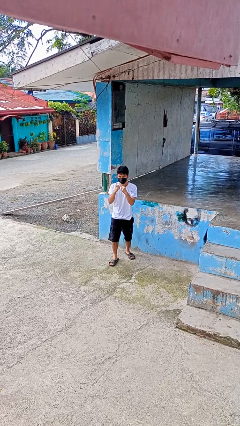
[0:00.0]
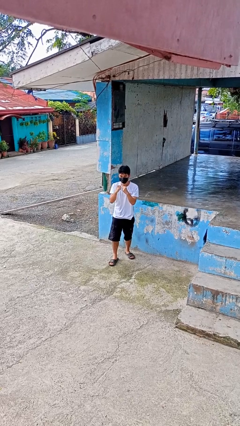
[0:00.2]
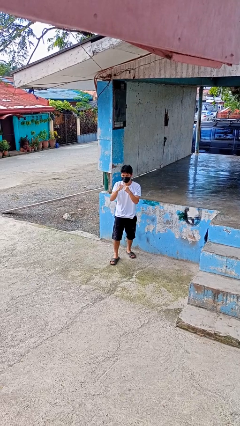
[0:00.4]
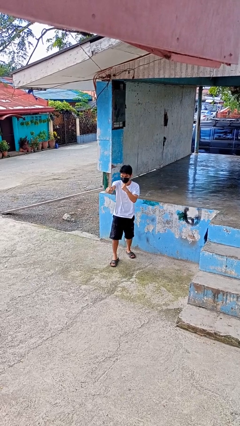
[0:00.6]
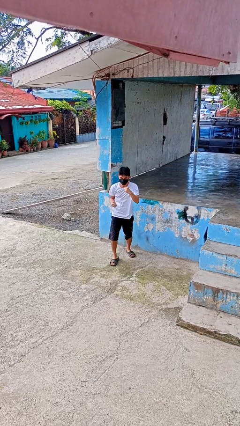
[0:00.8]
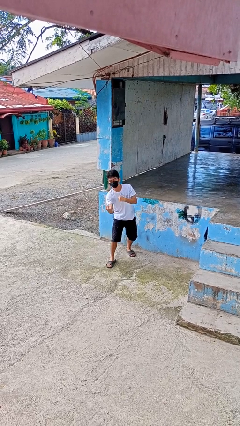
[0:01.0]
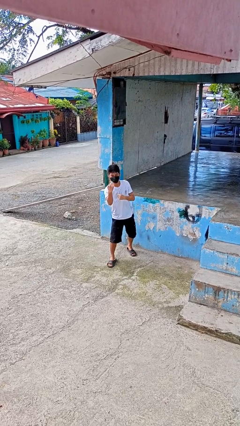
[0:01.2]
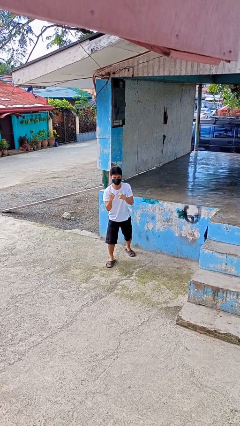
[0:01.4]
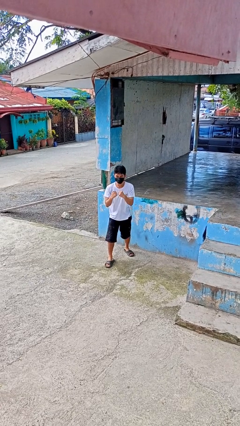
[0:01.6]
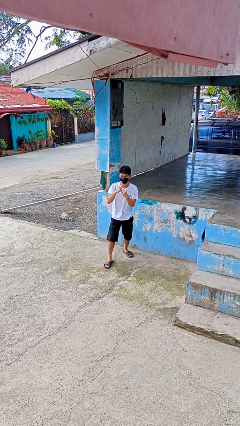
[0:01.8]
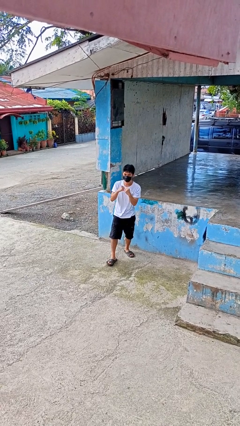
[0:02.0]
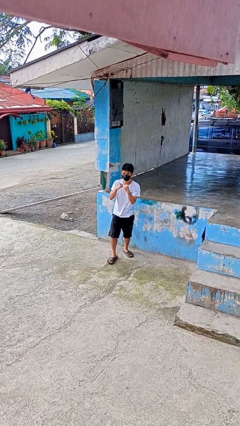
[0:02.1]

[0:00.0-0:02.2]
person punches

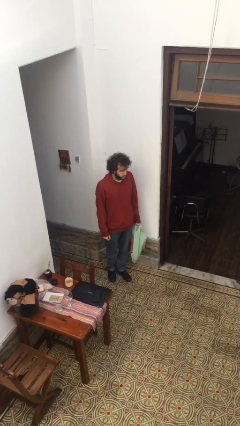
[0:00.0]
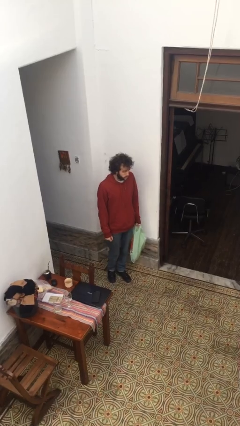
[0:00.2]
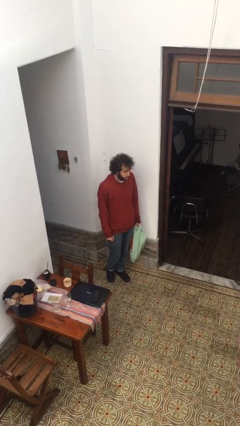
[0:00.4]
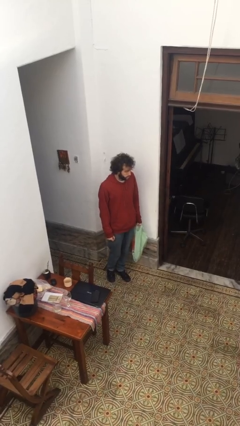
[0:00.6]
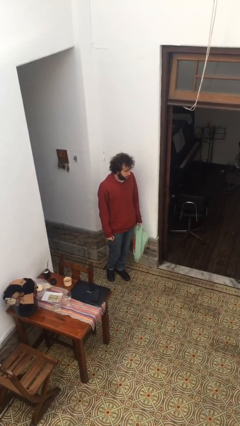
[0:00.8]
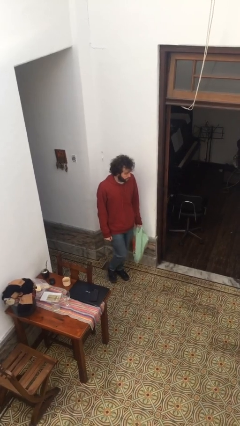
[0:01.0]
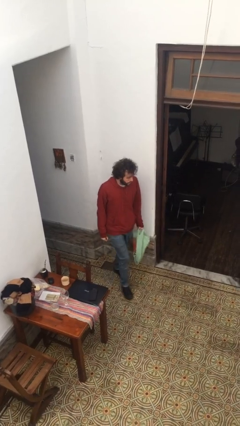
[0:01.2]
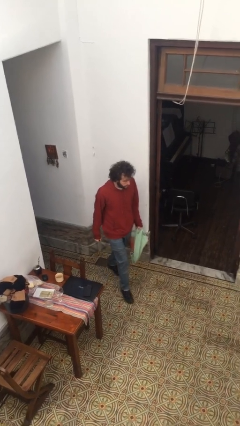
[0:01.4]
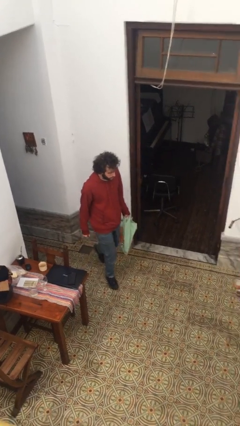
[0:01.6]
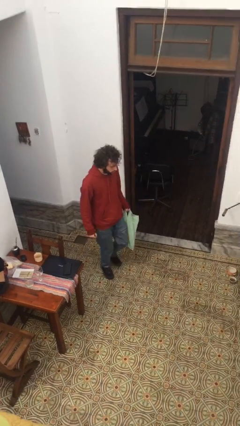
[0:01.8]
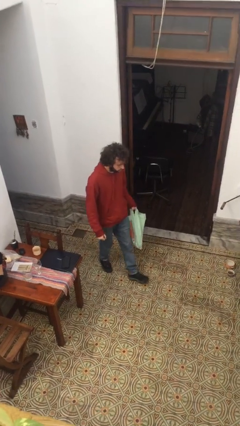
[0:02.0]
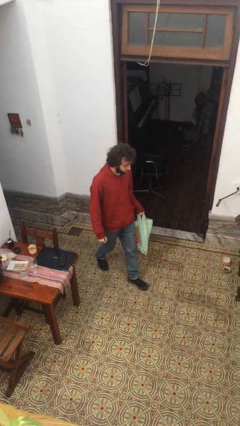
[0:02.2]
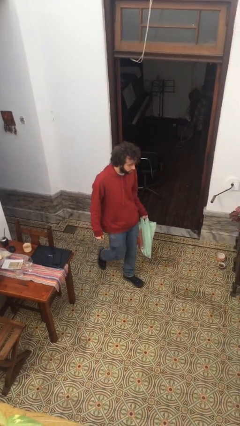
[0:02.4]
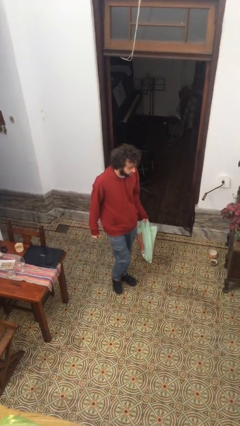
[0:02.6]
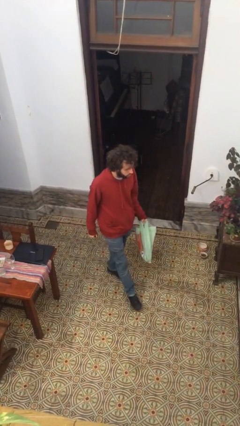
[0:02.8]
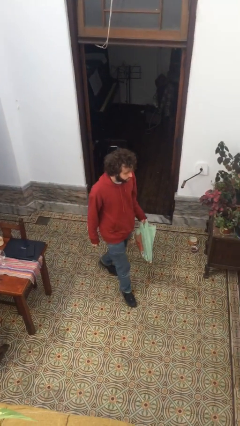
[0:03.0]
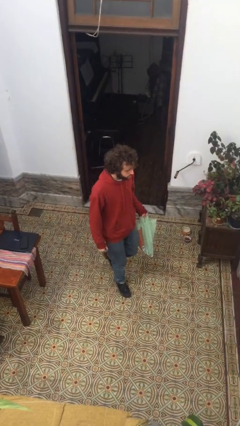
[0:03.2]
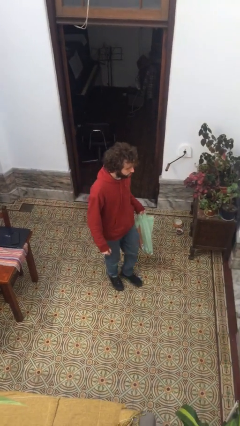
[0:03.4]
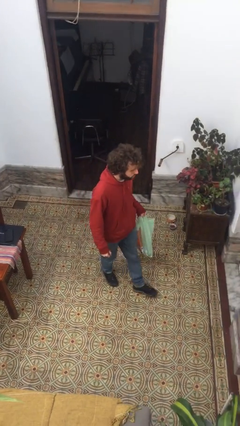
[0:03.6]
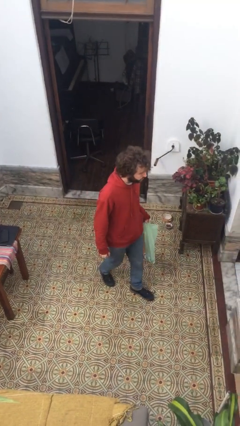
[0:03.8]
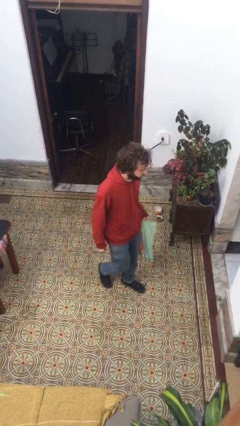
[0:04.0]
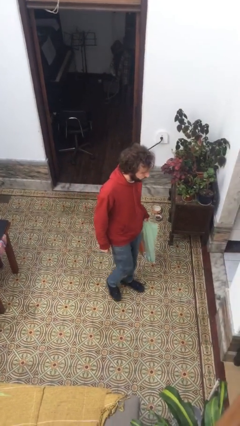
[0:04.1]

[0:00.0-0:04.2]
person carries groceries

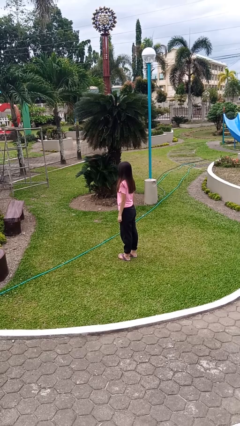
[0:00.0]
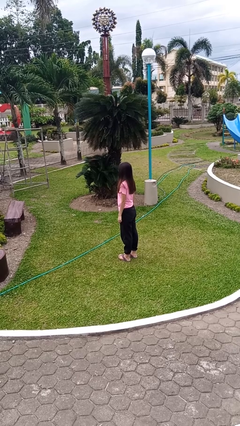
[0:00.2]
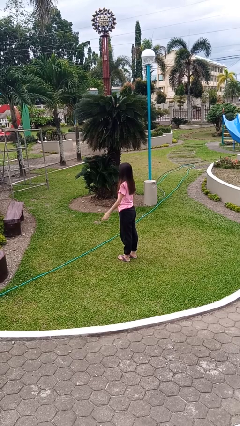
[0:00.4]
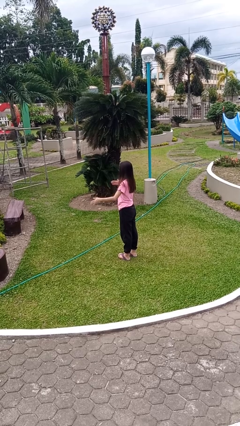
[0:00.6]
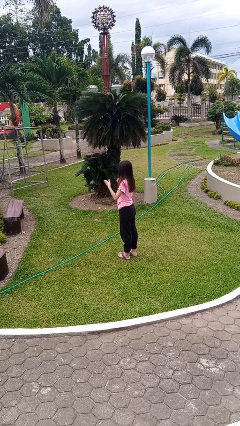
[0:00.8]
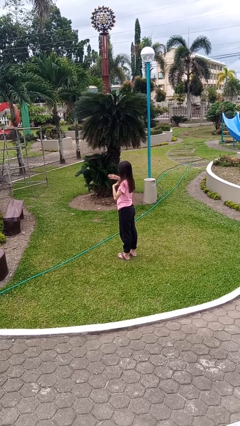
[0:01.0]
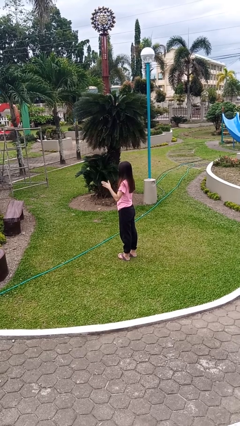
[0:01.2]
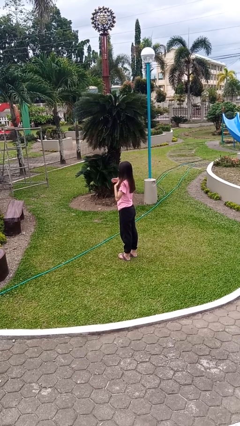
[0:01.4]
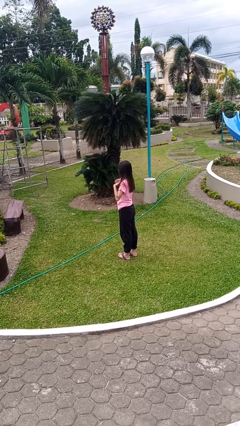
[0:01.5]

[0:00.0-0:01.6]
person drums on chest

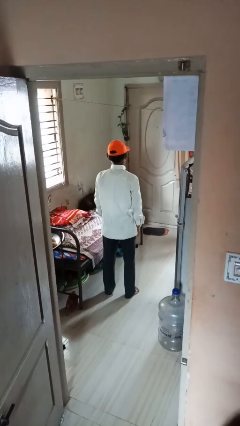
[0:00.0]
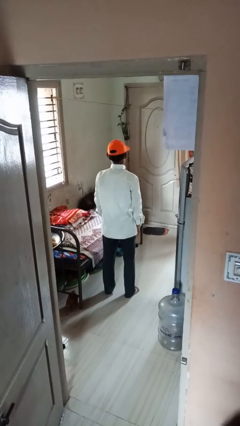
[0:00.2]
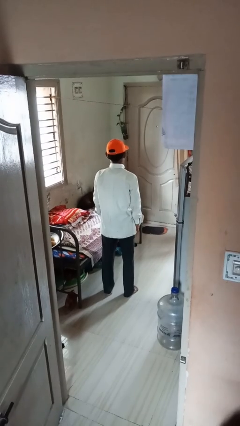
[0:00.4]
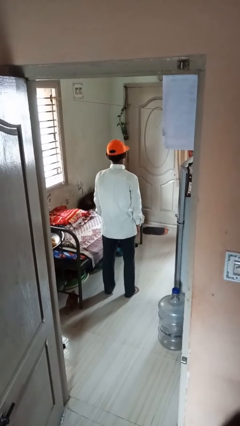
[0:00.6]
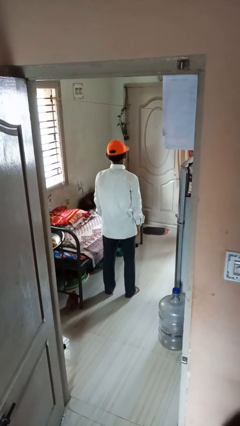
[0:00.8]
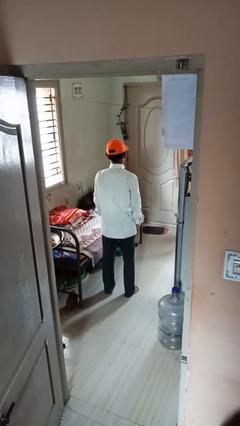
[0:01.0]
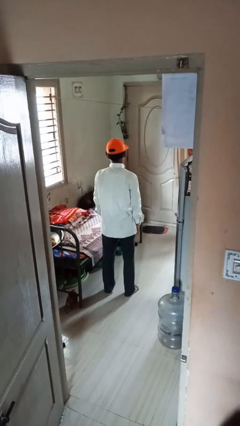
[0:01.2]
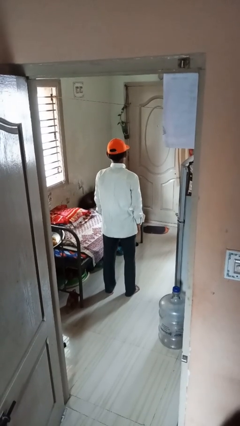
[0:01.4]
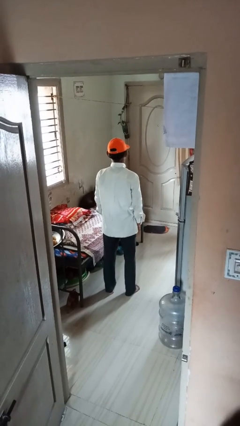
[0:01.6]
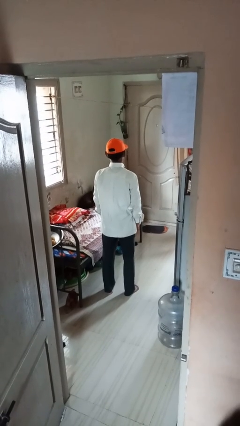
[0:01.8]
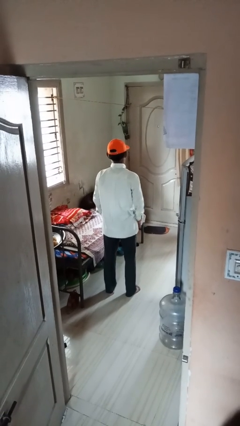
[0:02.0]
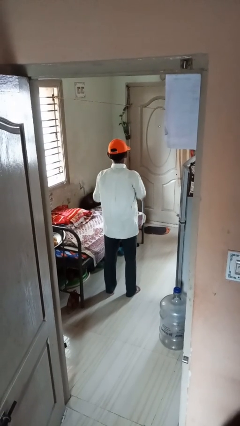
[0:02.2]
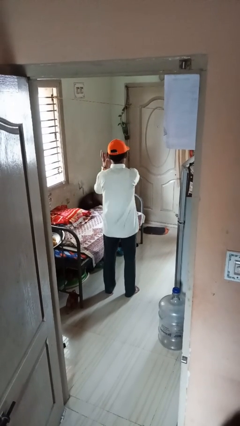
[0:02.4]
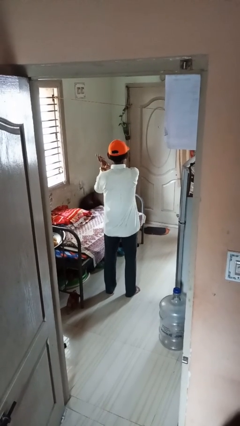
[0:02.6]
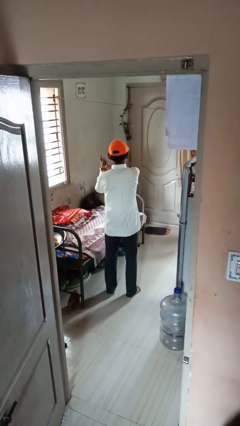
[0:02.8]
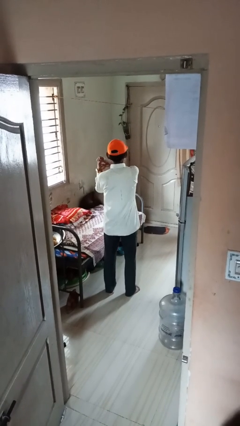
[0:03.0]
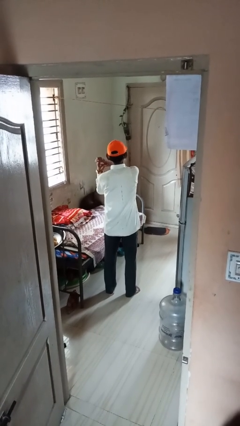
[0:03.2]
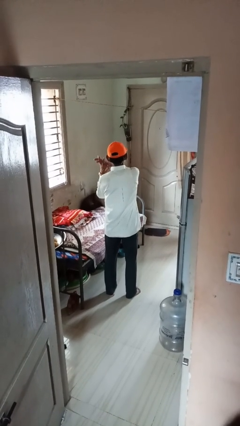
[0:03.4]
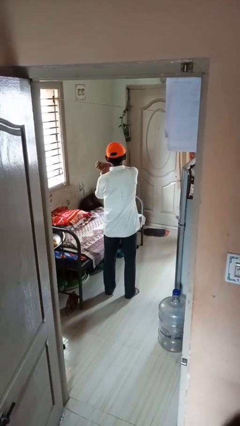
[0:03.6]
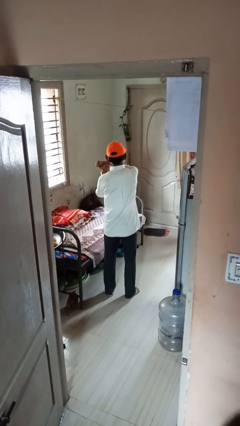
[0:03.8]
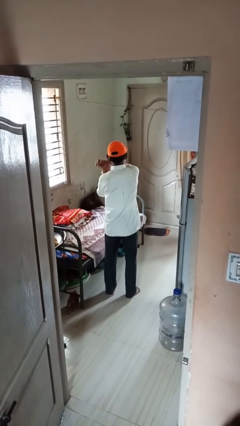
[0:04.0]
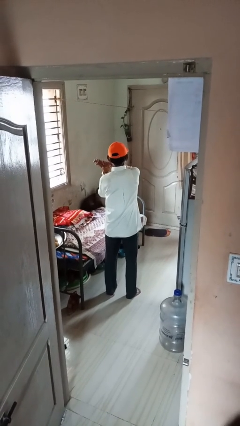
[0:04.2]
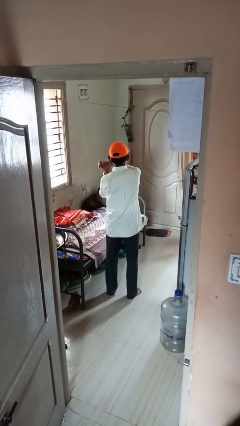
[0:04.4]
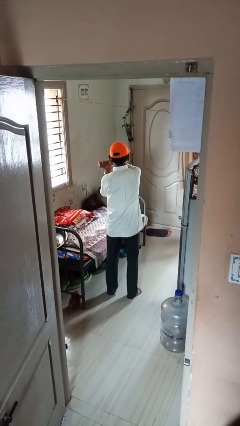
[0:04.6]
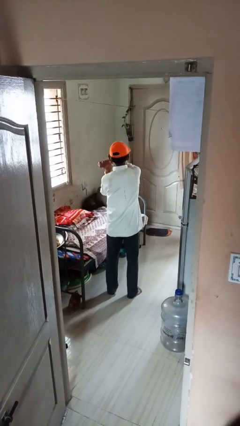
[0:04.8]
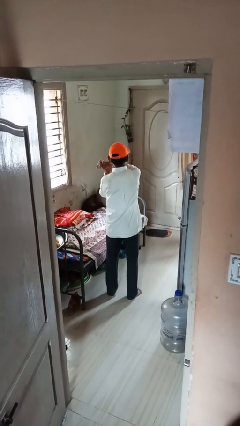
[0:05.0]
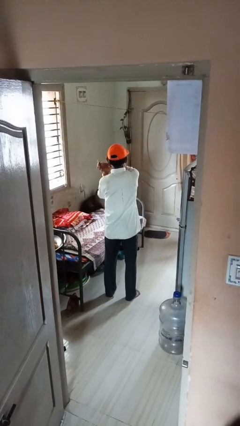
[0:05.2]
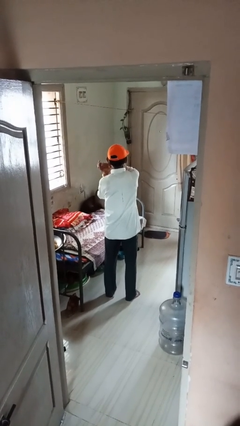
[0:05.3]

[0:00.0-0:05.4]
person cracks knuckles

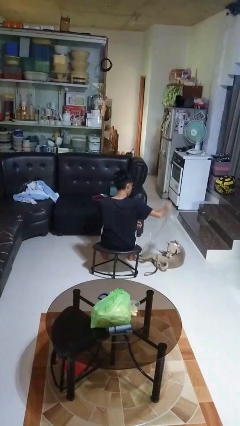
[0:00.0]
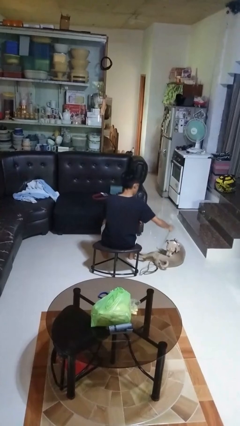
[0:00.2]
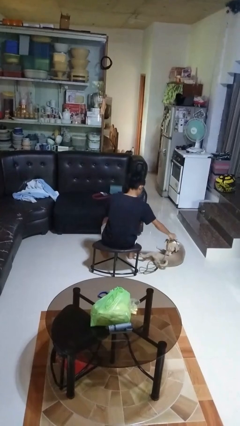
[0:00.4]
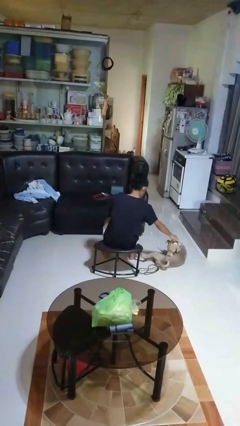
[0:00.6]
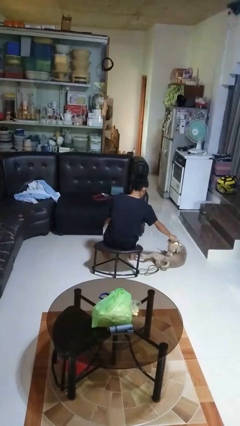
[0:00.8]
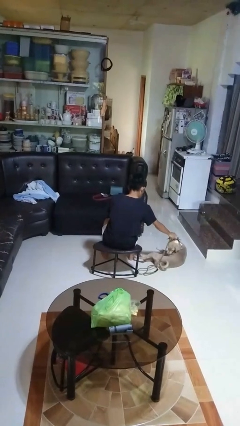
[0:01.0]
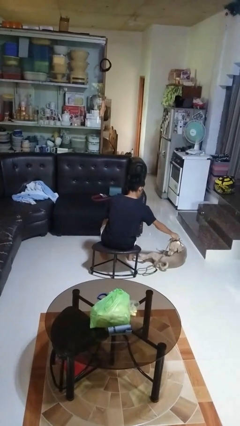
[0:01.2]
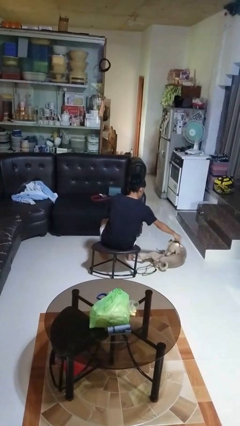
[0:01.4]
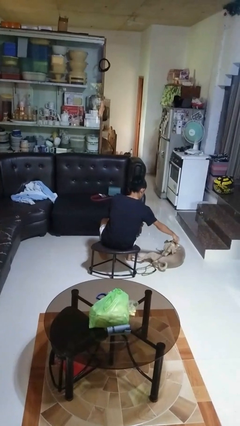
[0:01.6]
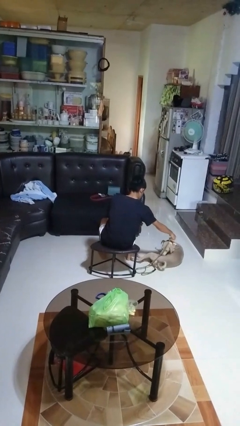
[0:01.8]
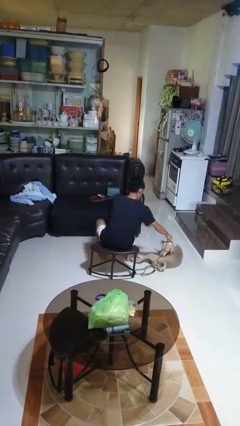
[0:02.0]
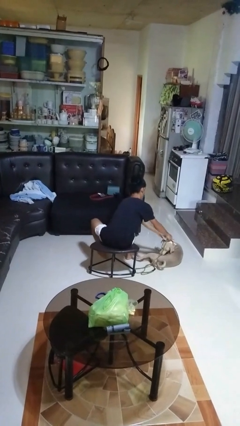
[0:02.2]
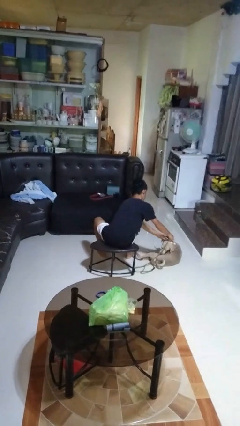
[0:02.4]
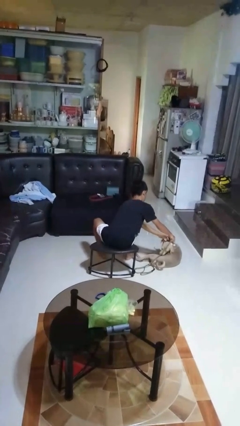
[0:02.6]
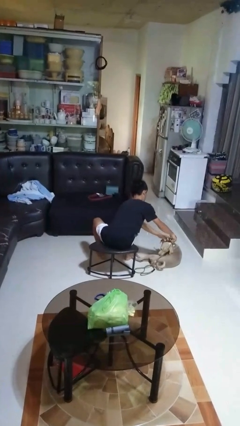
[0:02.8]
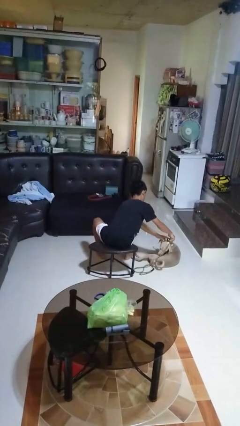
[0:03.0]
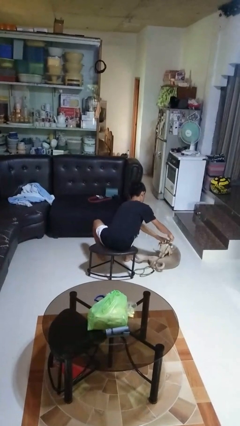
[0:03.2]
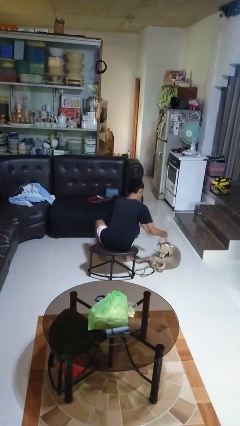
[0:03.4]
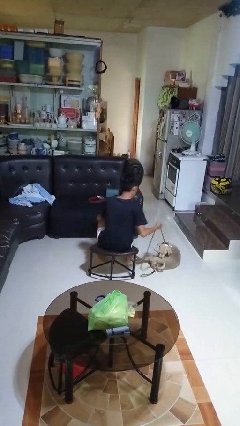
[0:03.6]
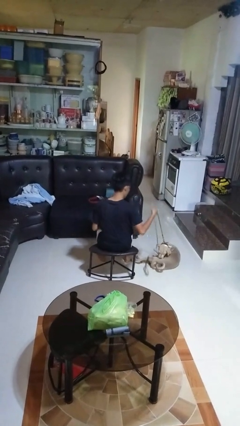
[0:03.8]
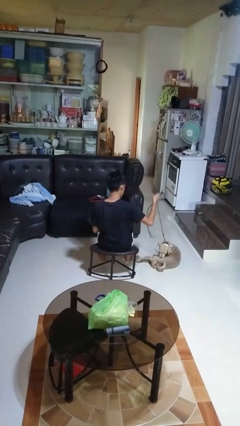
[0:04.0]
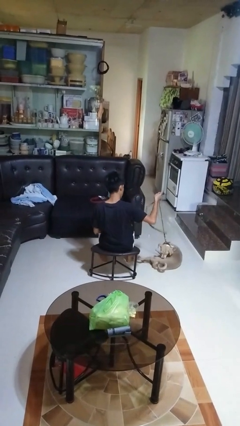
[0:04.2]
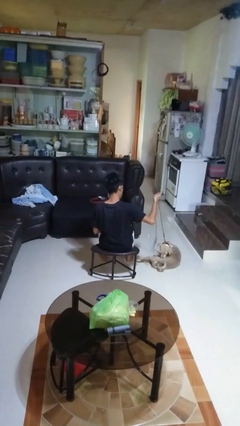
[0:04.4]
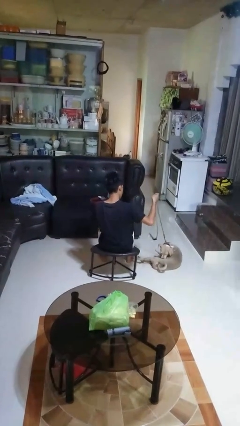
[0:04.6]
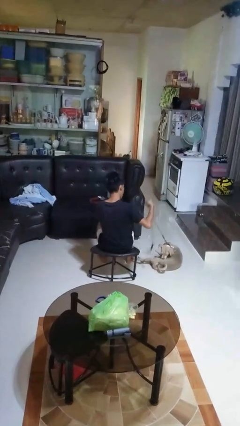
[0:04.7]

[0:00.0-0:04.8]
person attaches leash to dog
